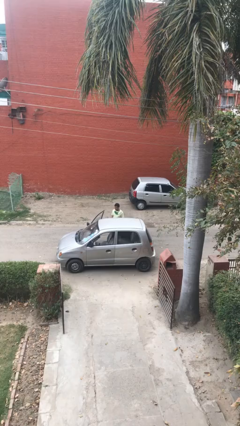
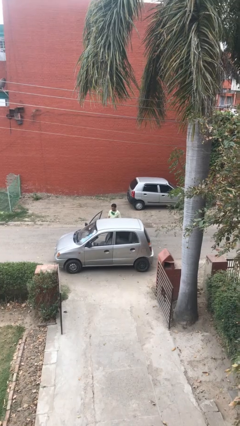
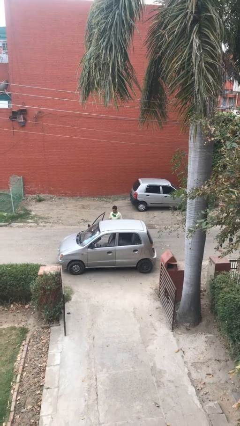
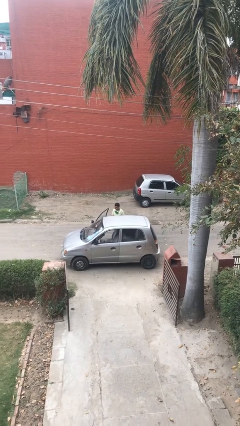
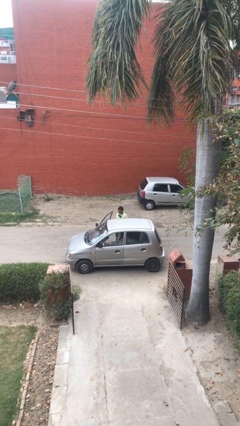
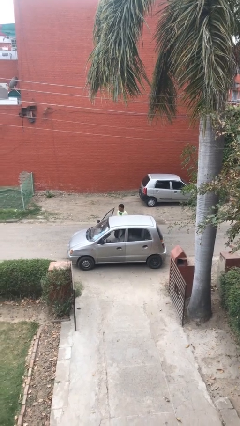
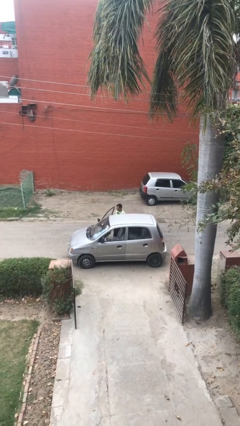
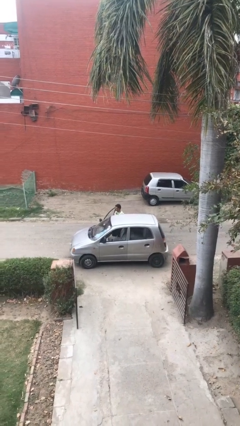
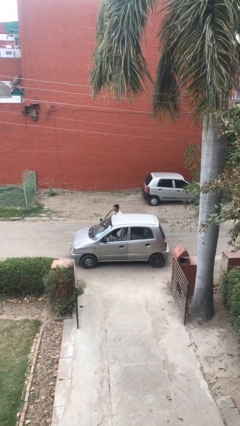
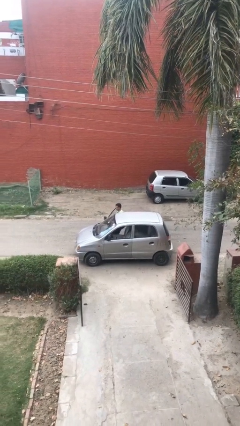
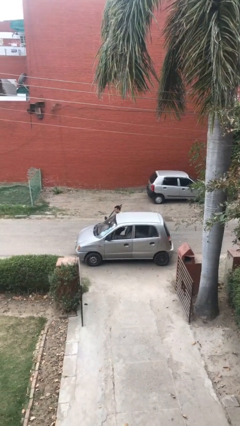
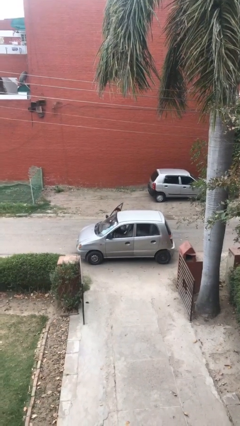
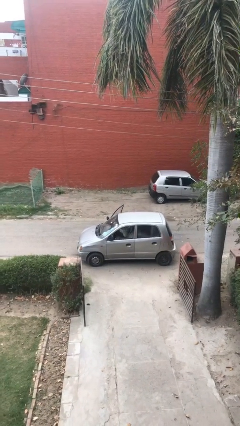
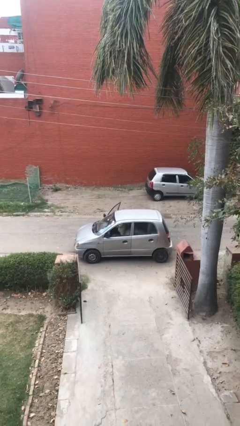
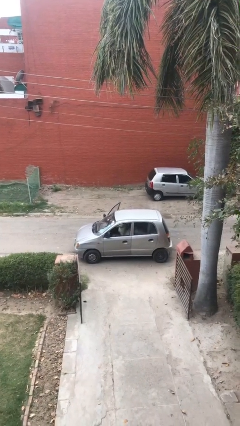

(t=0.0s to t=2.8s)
person enters car

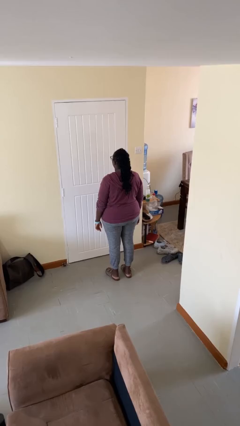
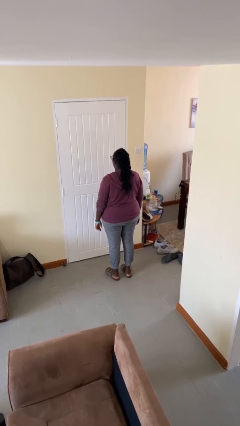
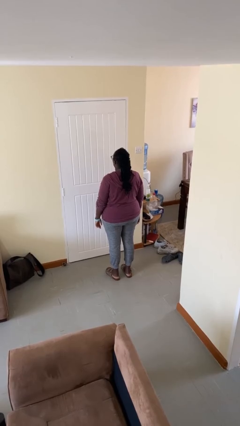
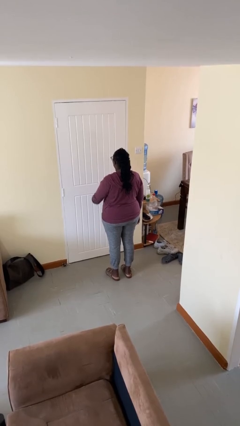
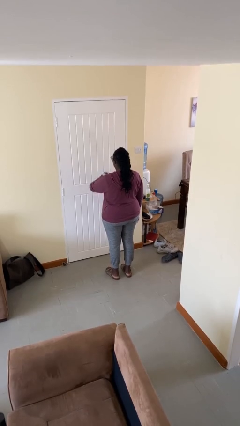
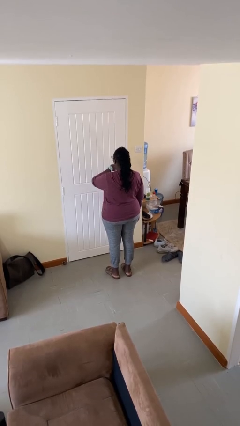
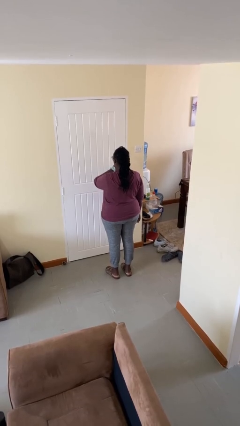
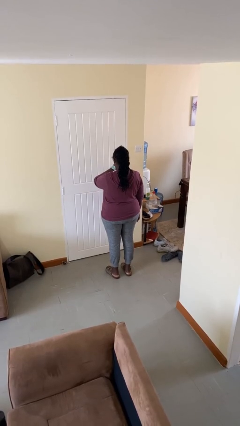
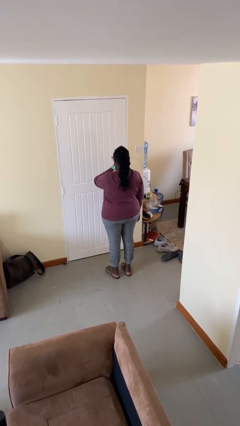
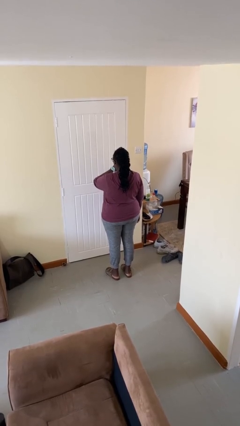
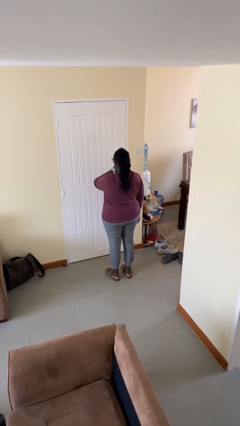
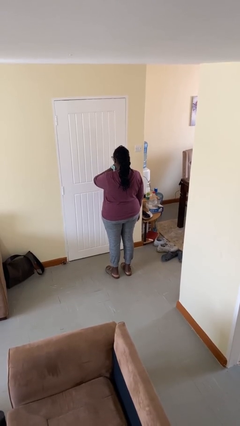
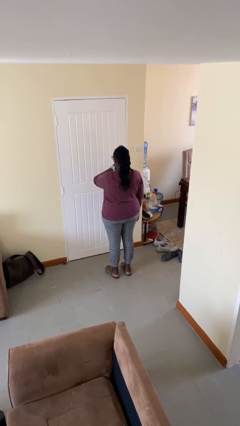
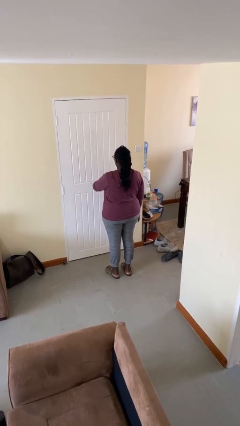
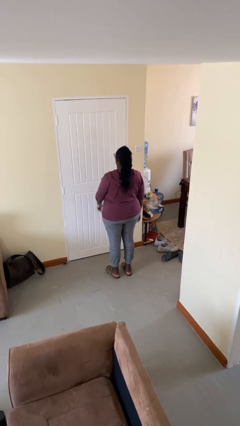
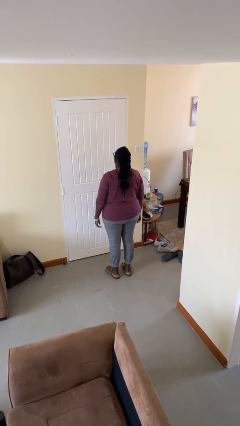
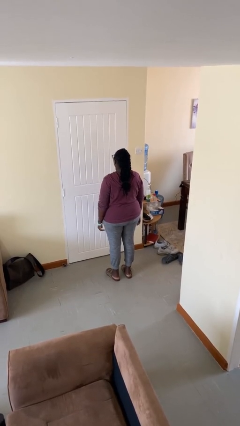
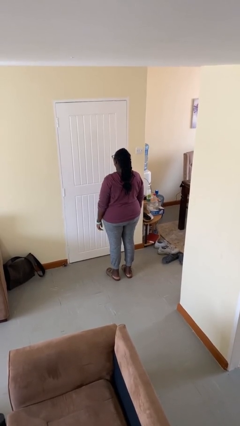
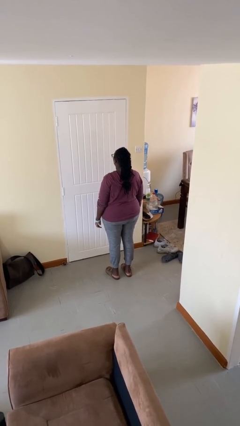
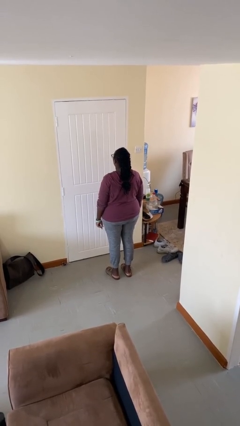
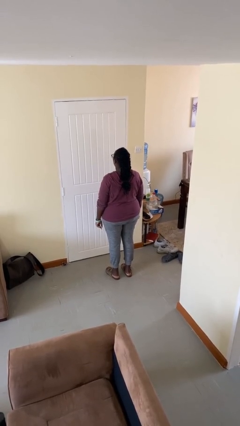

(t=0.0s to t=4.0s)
person looks at wristwatch

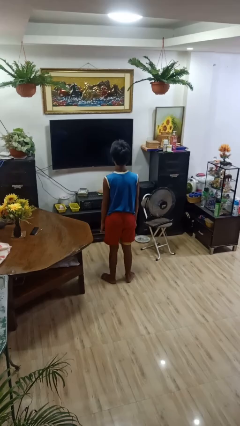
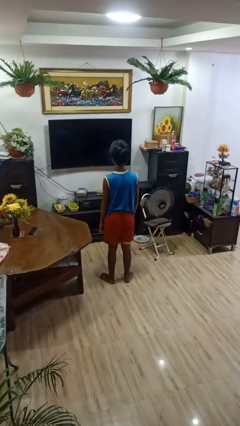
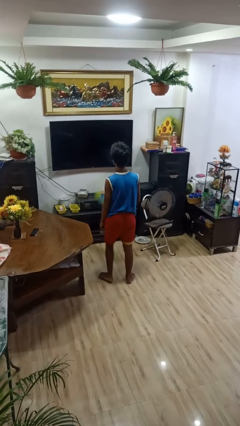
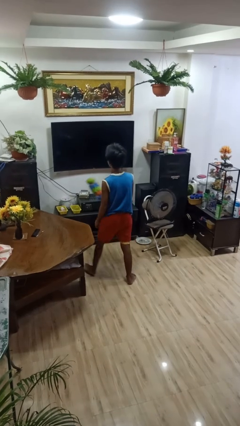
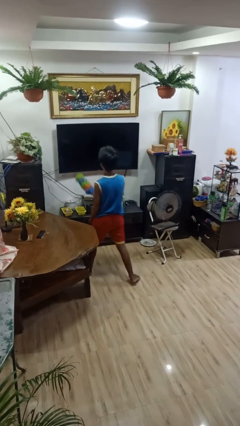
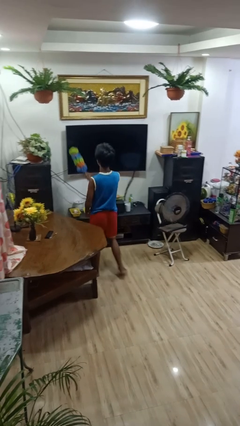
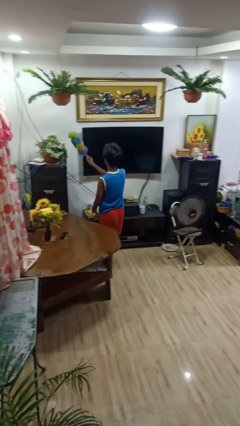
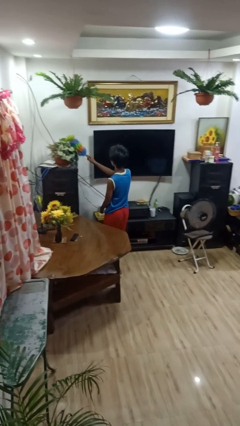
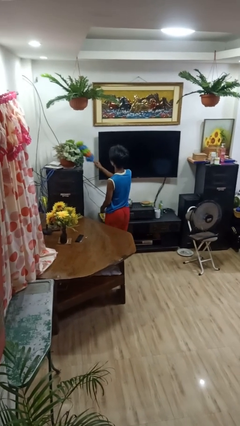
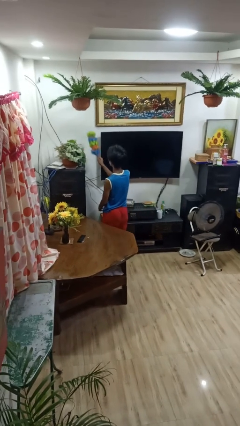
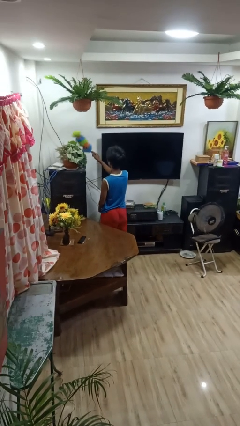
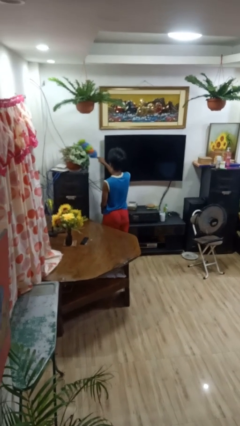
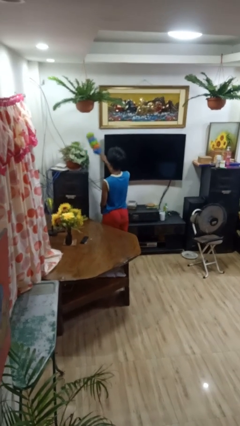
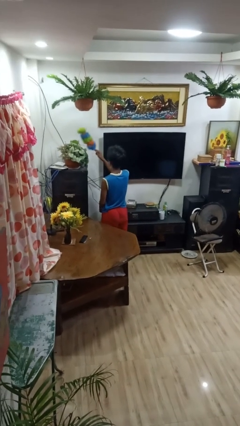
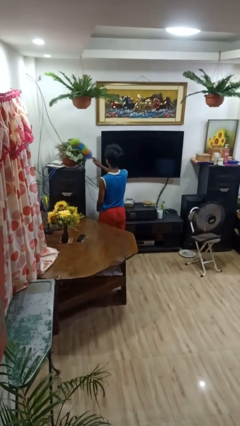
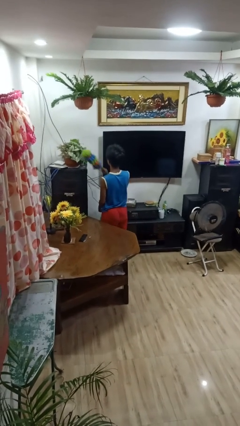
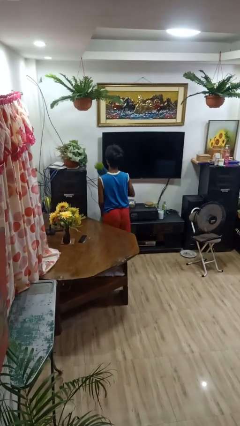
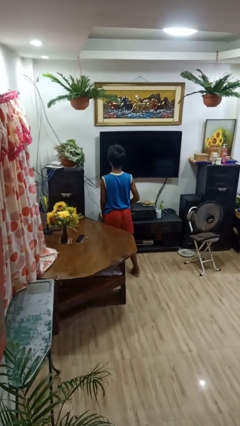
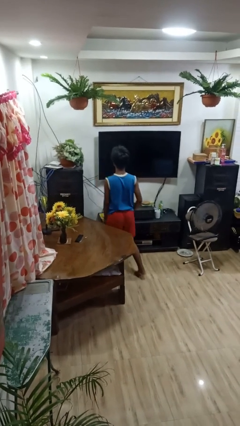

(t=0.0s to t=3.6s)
person dusts furniture

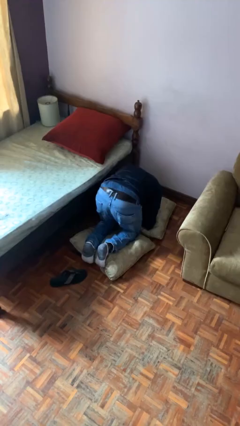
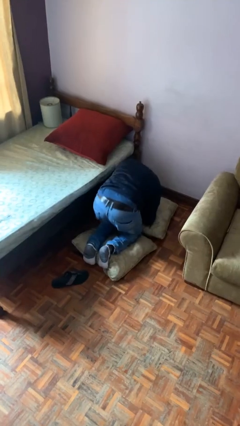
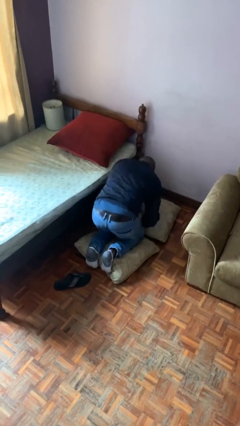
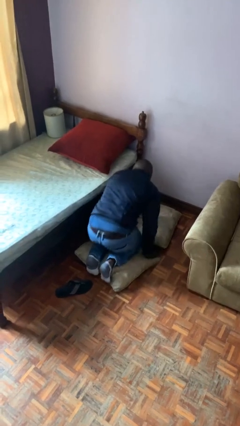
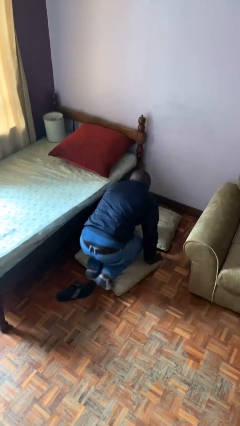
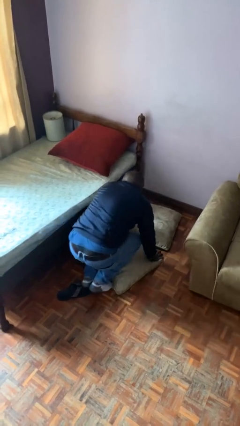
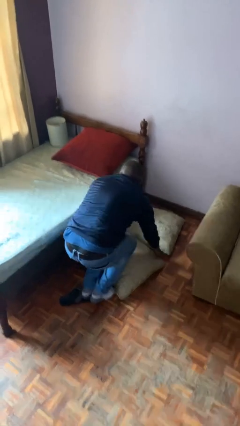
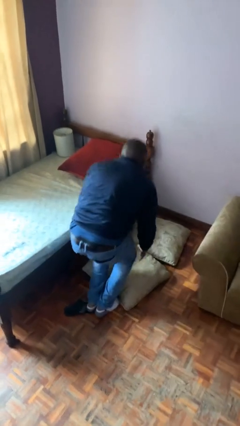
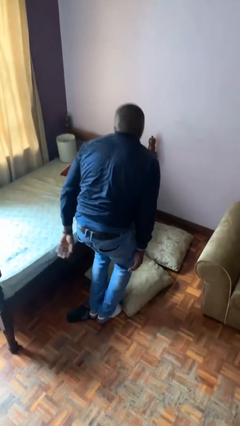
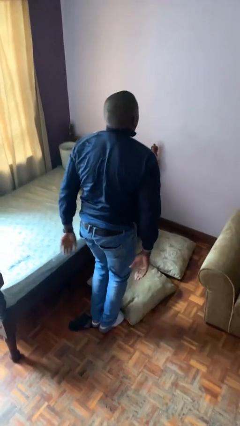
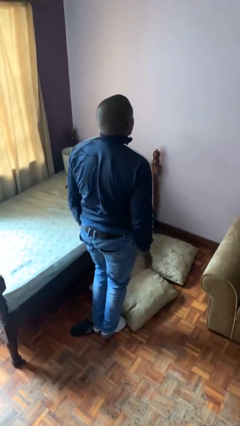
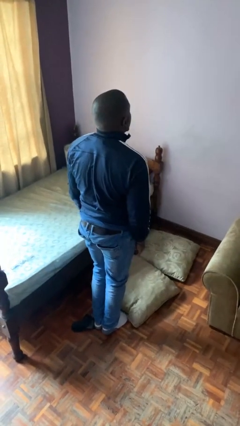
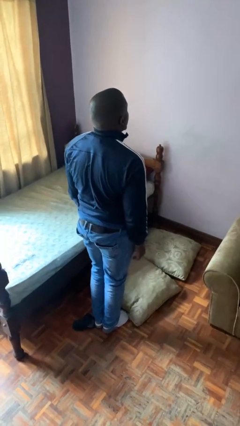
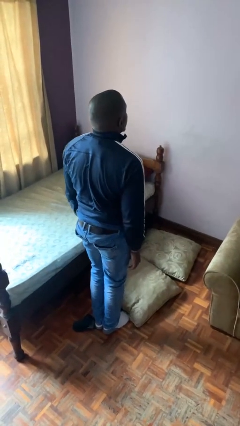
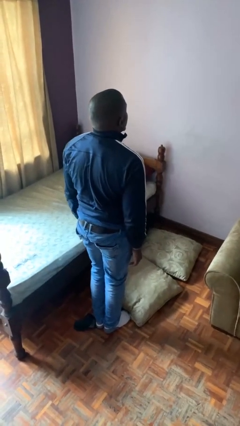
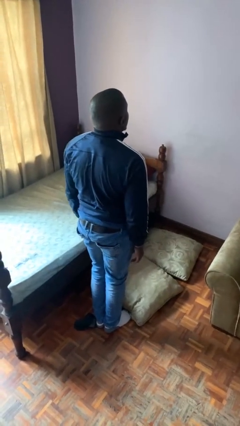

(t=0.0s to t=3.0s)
person stands up from floor

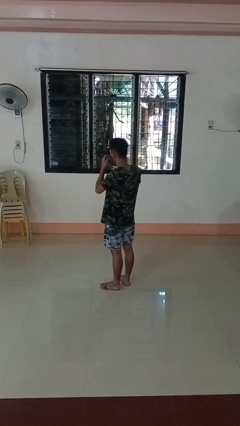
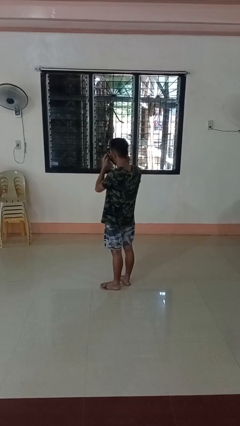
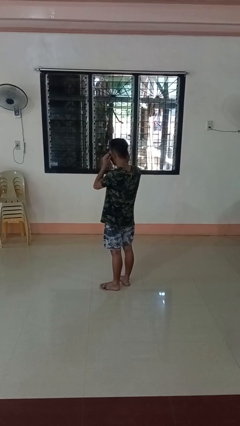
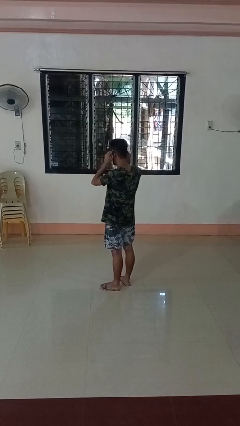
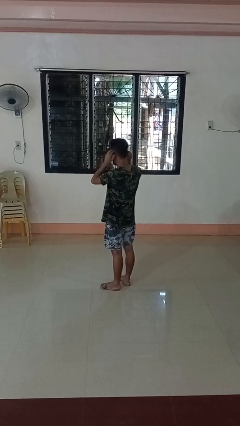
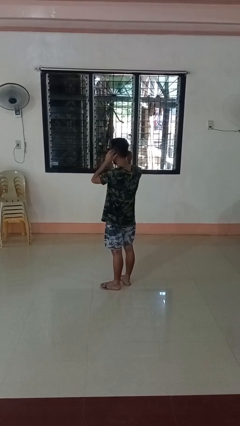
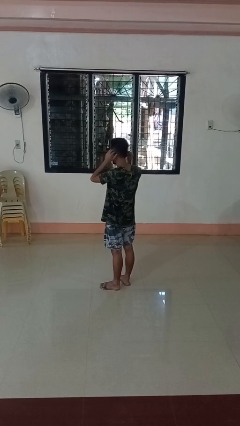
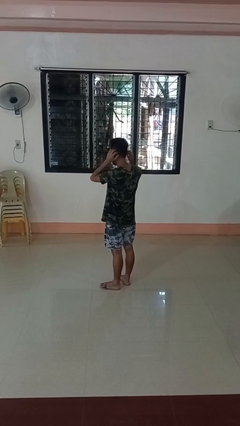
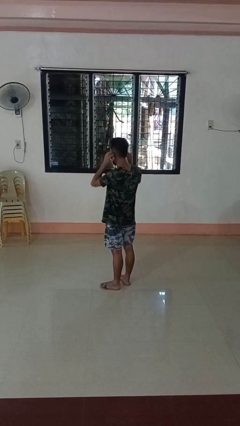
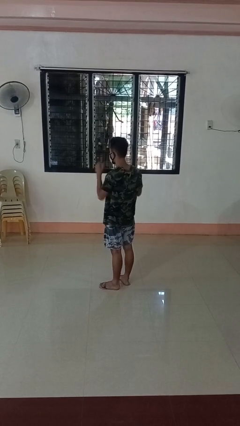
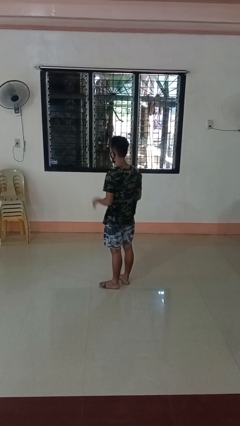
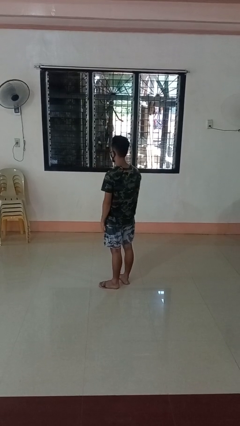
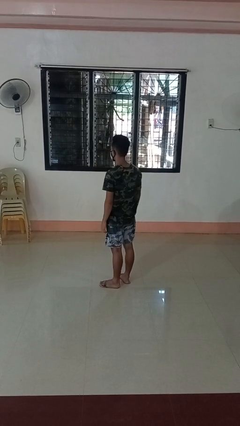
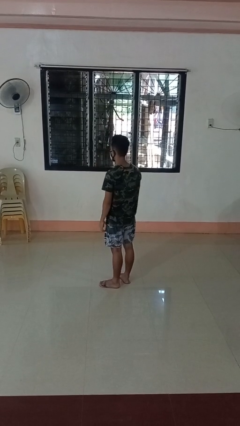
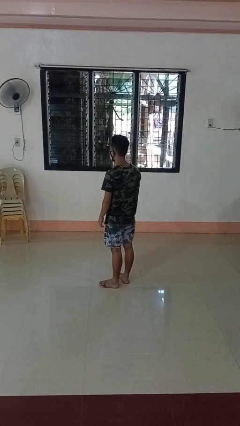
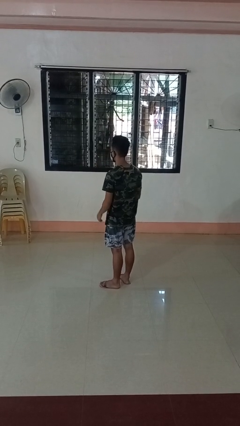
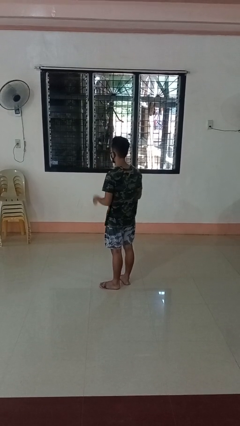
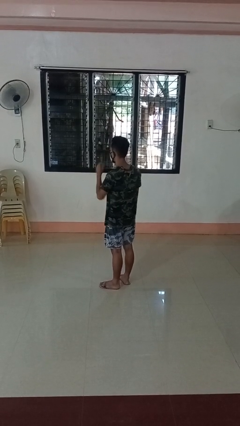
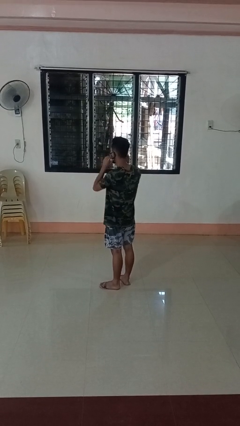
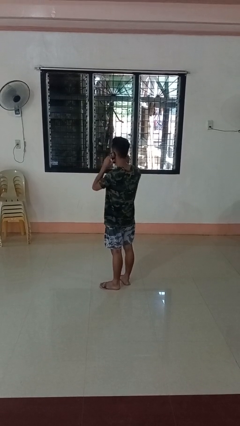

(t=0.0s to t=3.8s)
person puts on facemask

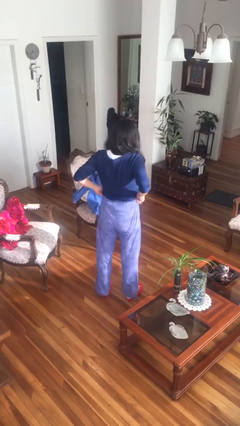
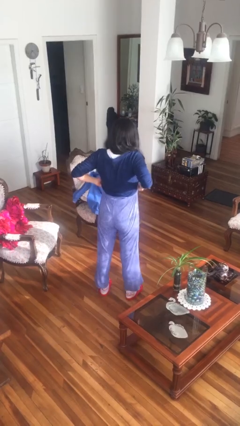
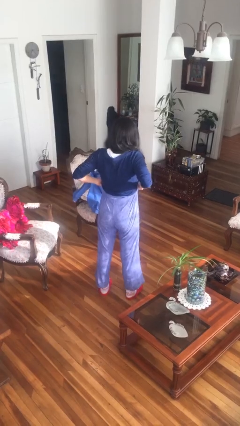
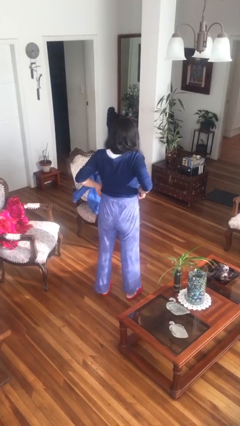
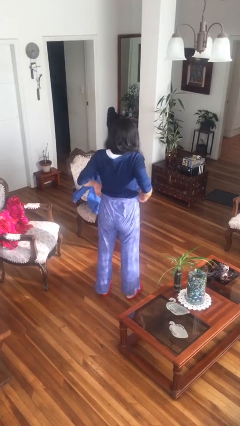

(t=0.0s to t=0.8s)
person hikes up pants
